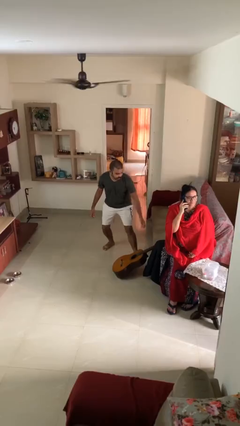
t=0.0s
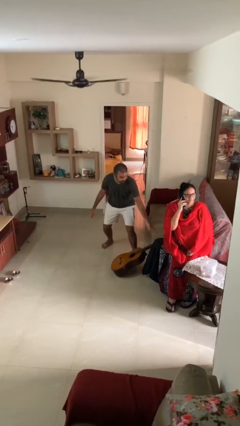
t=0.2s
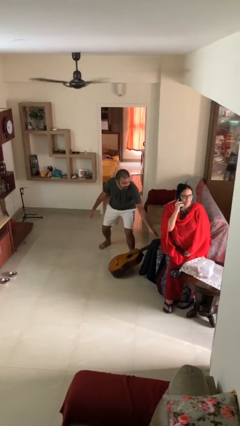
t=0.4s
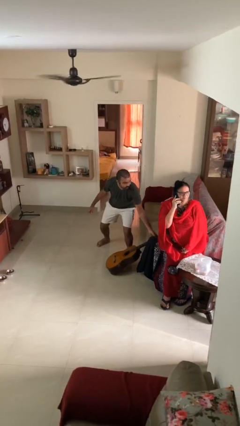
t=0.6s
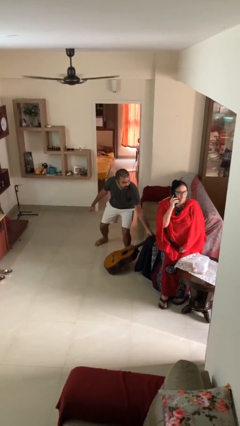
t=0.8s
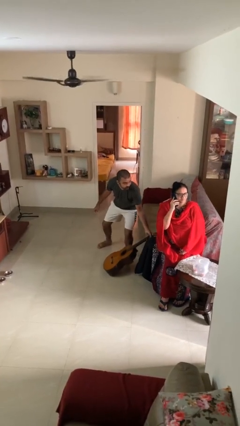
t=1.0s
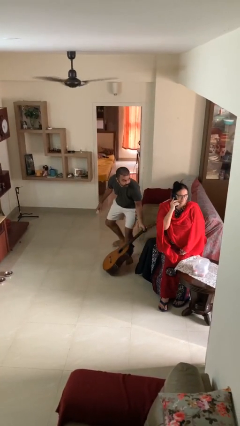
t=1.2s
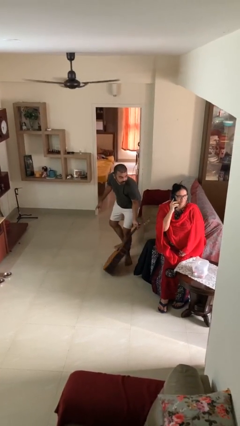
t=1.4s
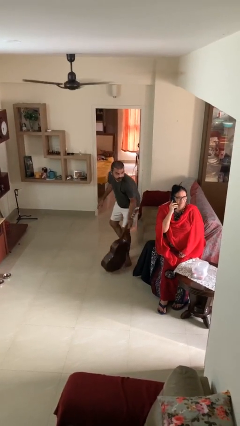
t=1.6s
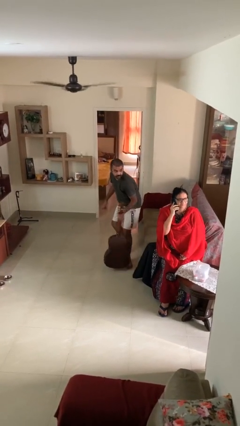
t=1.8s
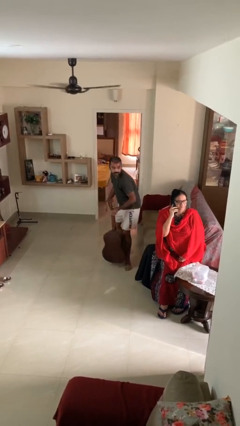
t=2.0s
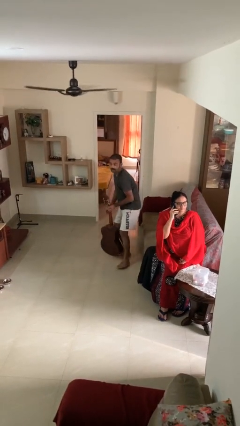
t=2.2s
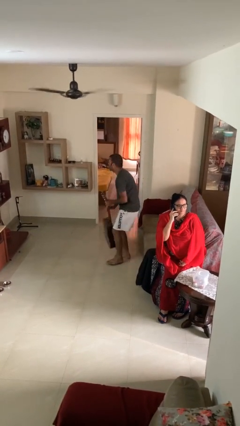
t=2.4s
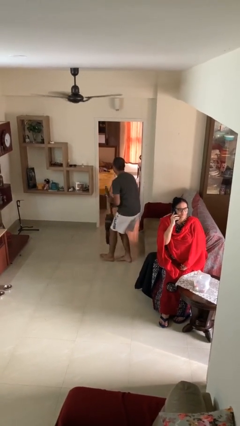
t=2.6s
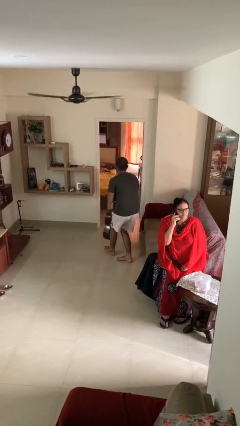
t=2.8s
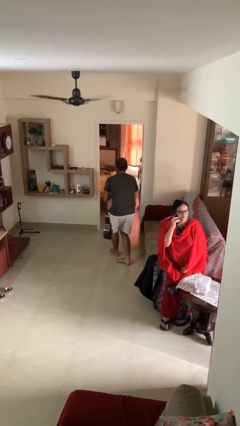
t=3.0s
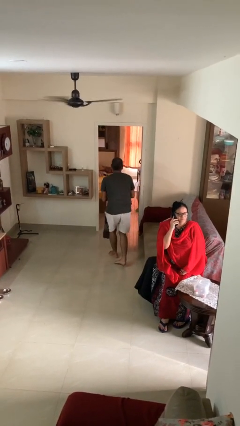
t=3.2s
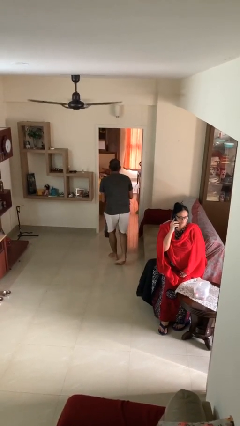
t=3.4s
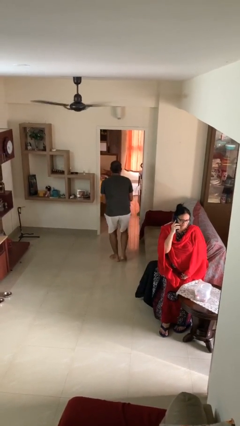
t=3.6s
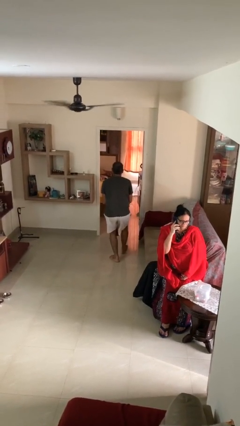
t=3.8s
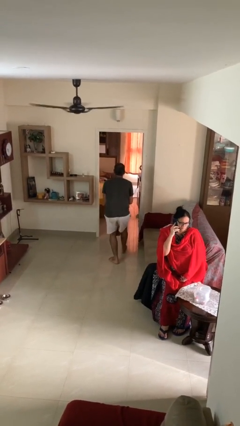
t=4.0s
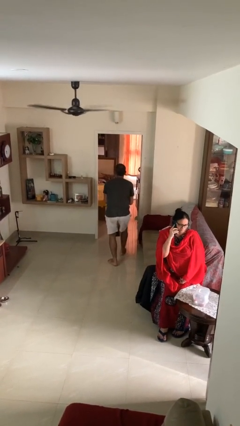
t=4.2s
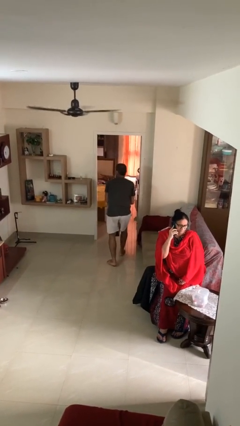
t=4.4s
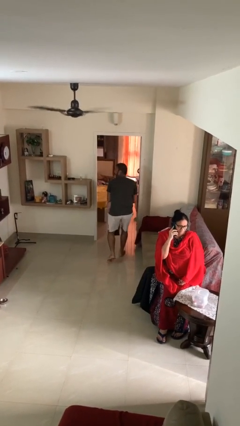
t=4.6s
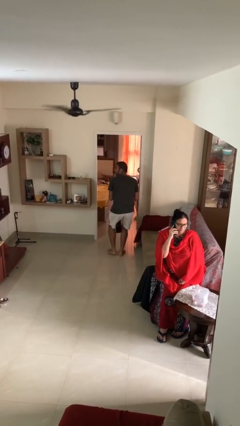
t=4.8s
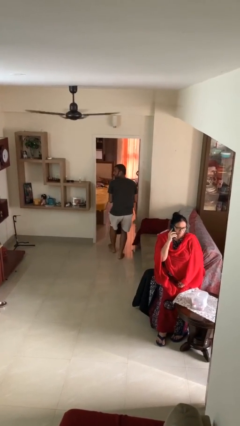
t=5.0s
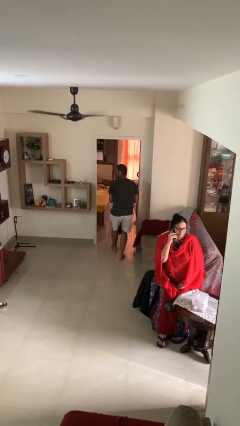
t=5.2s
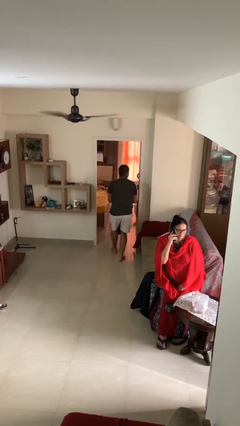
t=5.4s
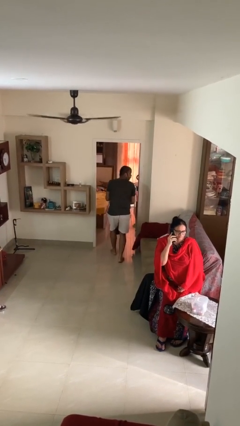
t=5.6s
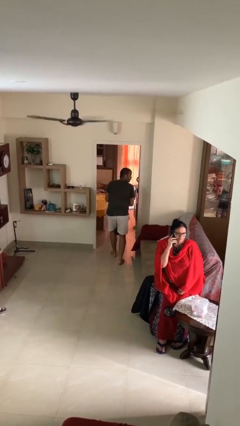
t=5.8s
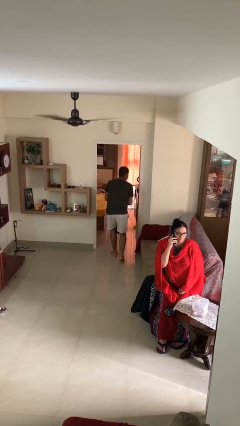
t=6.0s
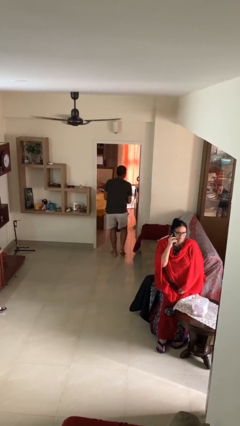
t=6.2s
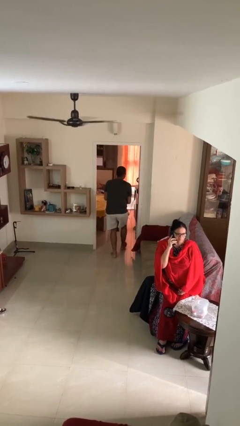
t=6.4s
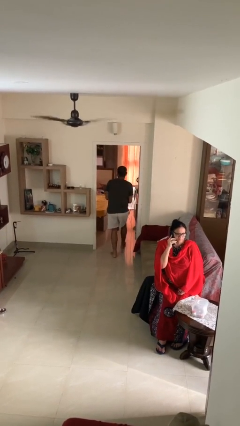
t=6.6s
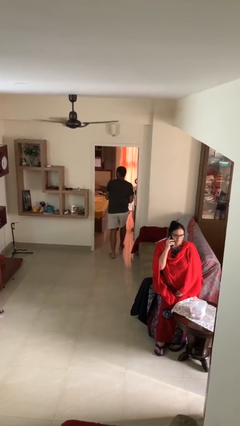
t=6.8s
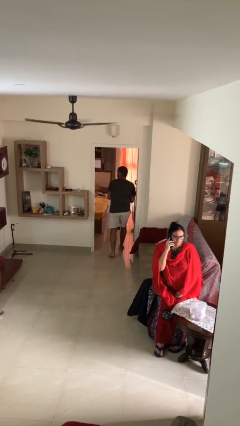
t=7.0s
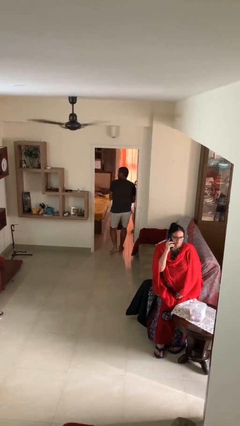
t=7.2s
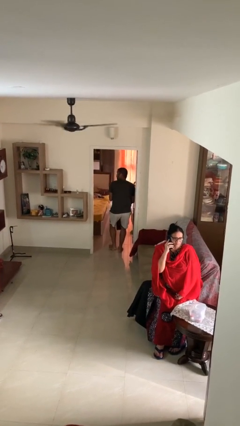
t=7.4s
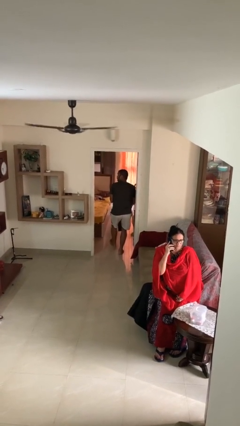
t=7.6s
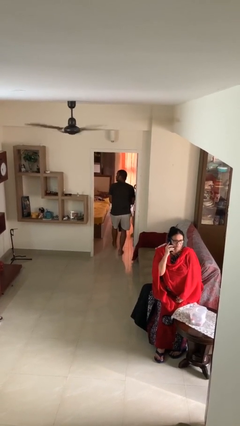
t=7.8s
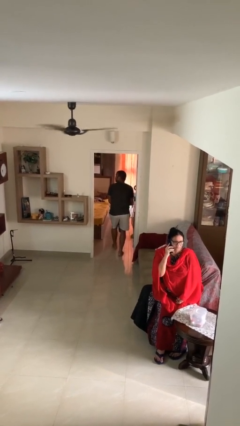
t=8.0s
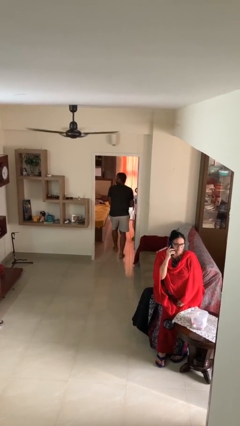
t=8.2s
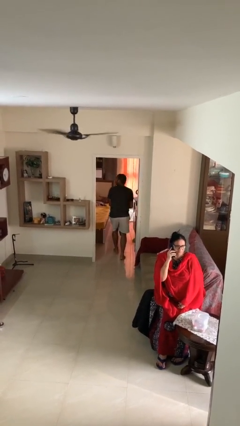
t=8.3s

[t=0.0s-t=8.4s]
person steals object from person

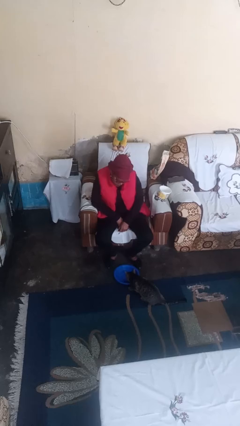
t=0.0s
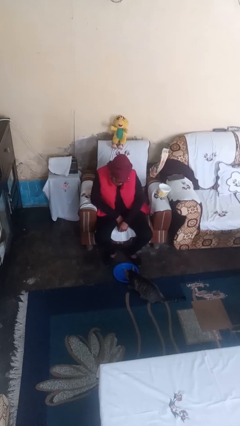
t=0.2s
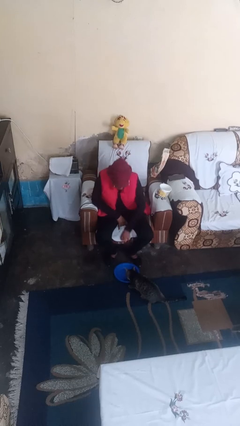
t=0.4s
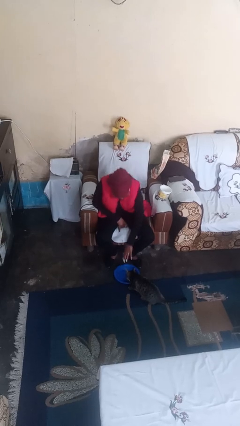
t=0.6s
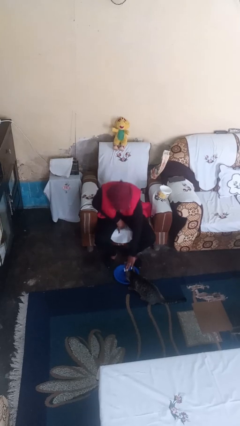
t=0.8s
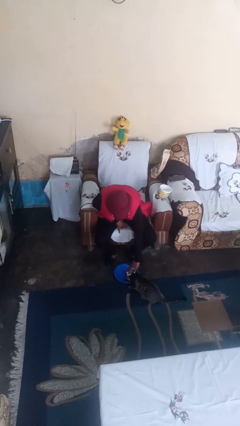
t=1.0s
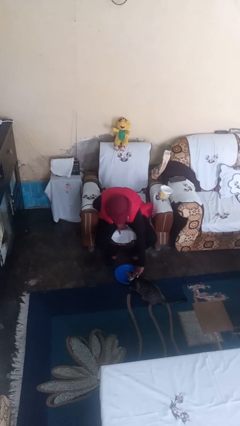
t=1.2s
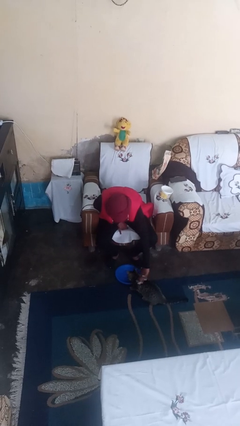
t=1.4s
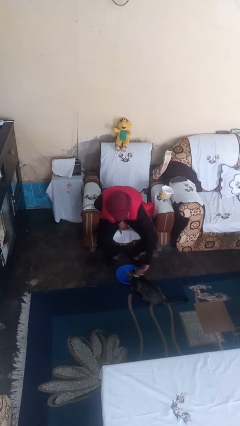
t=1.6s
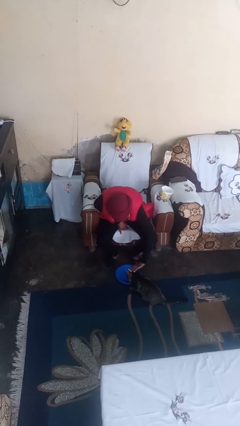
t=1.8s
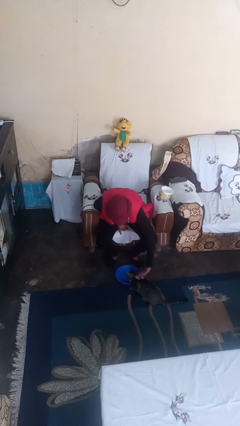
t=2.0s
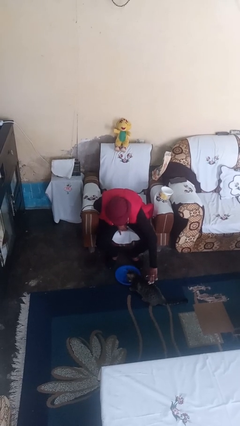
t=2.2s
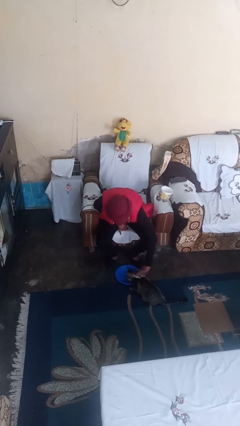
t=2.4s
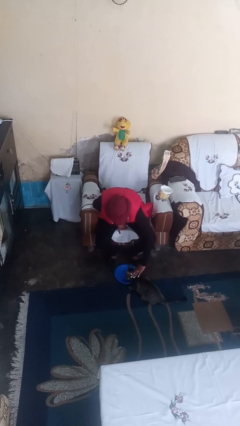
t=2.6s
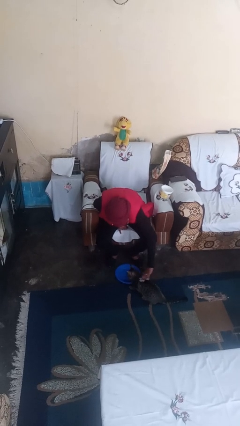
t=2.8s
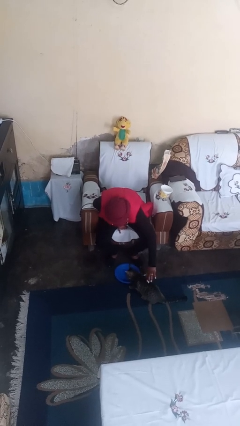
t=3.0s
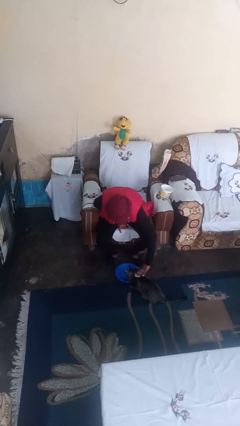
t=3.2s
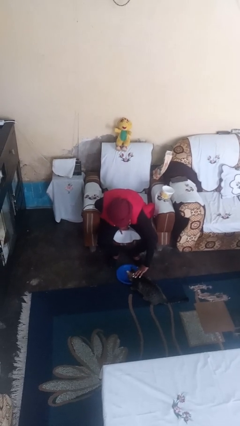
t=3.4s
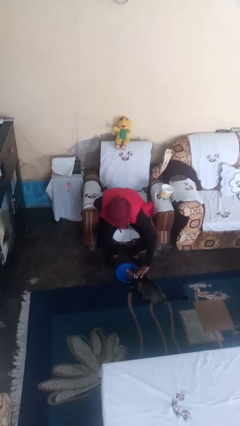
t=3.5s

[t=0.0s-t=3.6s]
person pets cat

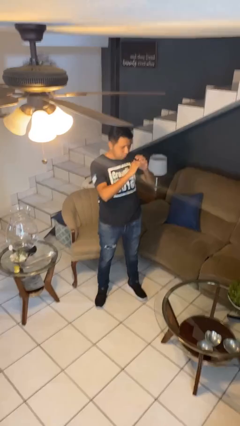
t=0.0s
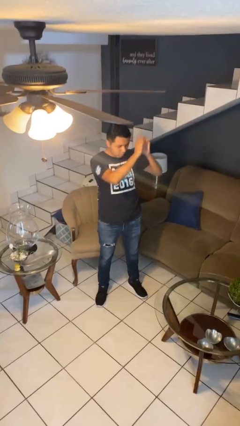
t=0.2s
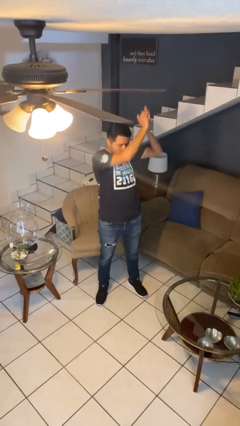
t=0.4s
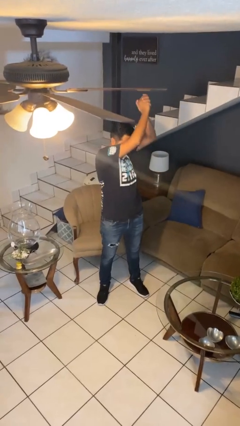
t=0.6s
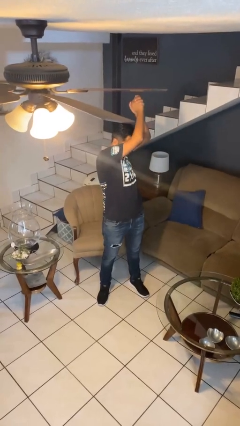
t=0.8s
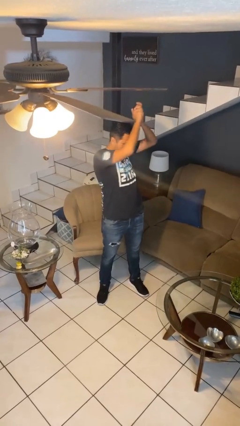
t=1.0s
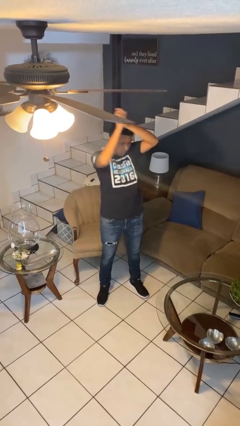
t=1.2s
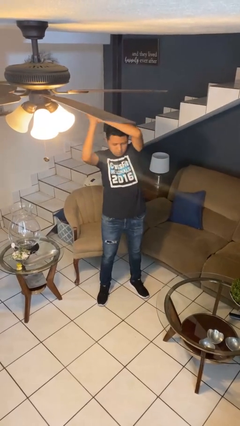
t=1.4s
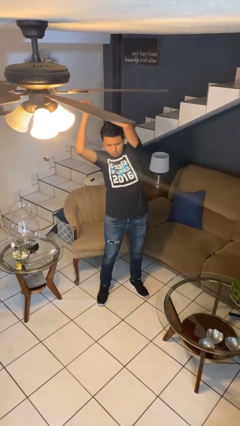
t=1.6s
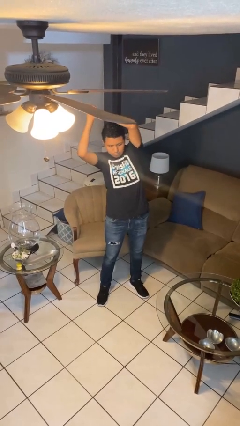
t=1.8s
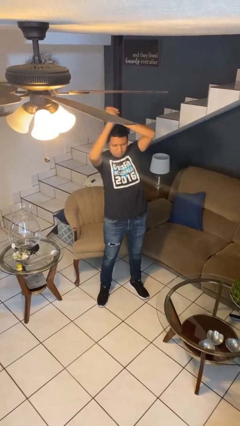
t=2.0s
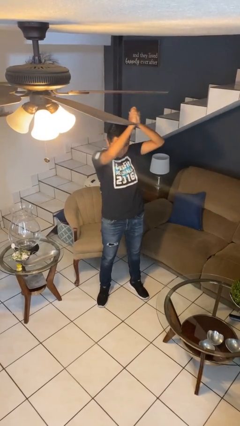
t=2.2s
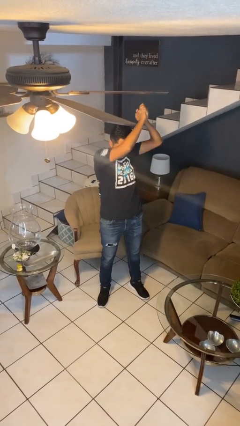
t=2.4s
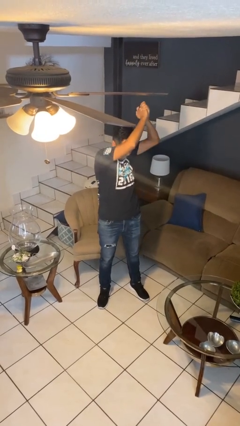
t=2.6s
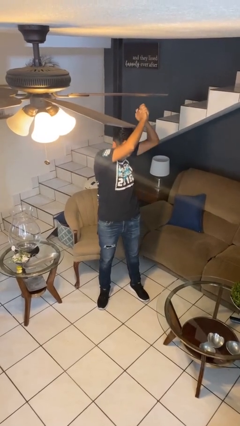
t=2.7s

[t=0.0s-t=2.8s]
person stretches arms over head

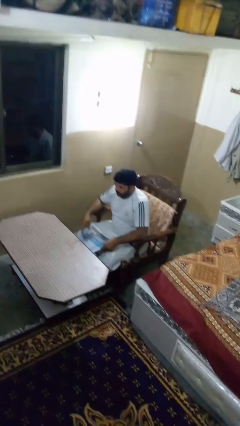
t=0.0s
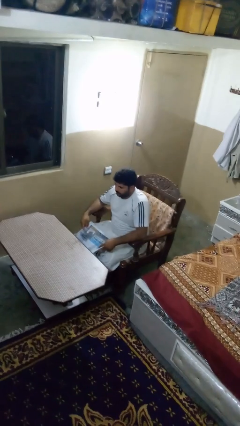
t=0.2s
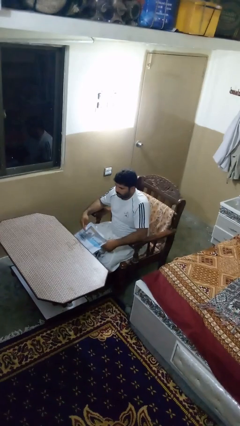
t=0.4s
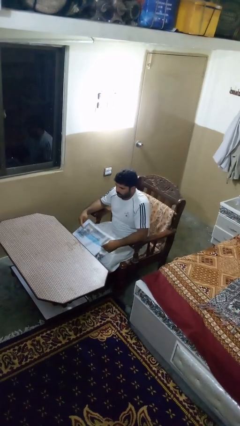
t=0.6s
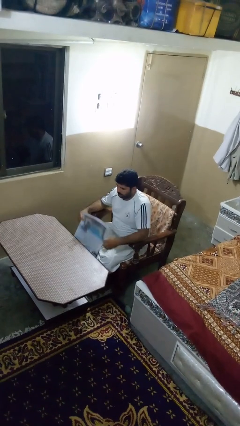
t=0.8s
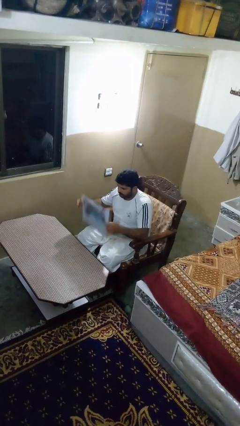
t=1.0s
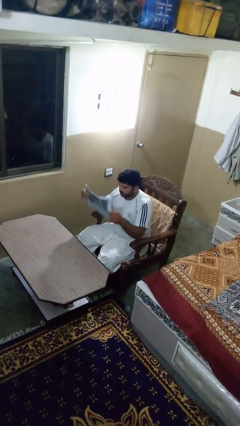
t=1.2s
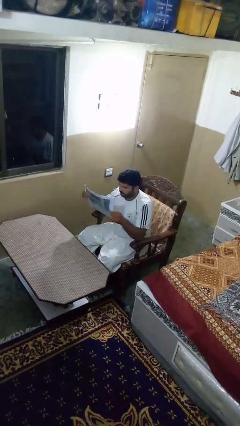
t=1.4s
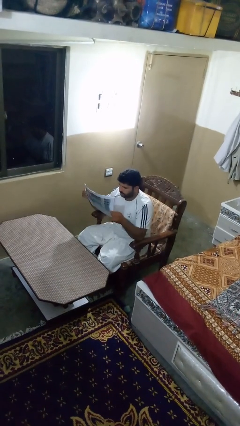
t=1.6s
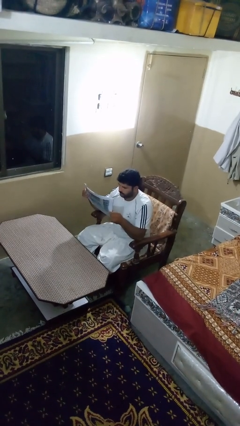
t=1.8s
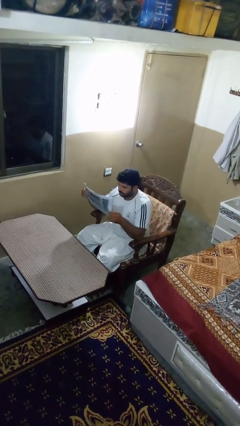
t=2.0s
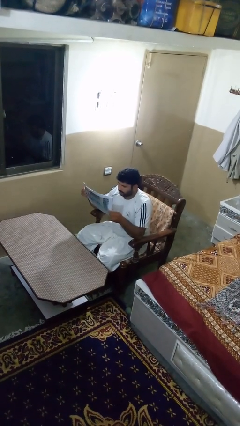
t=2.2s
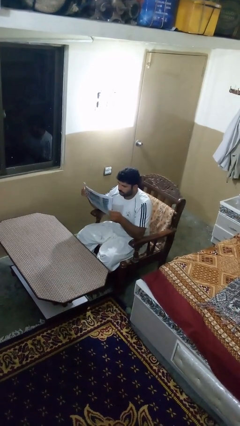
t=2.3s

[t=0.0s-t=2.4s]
person reads newspaper

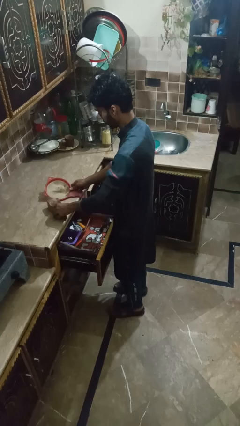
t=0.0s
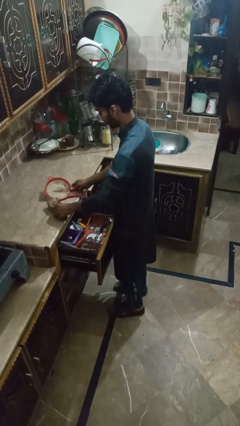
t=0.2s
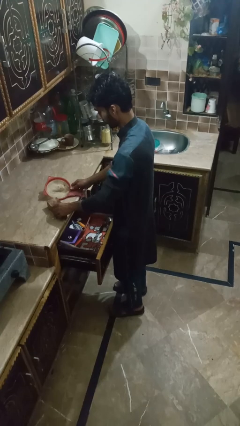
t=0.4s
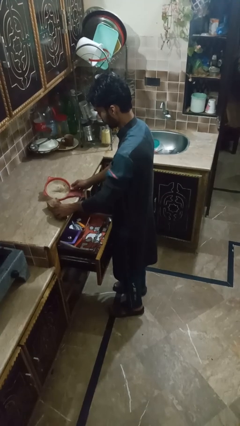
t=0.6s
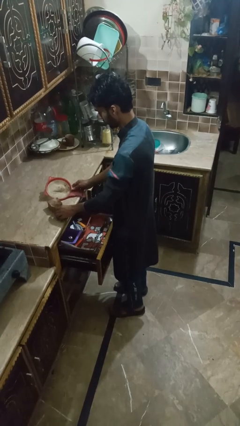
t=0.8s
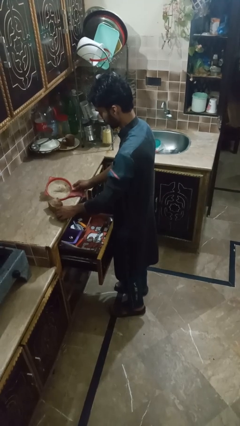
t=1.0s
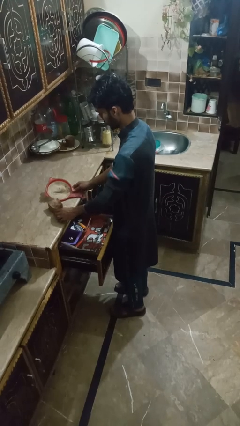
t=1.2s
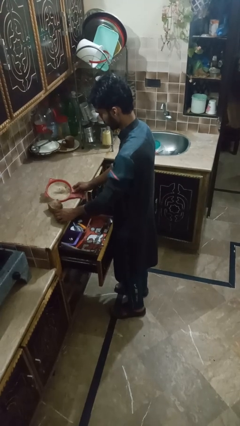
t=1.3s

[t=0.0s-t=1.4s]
person puts object into kitchen drawer
